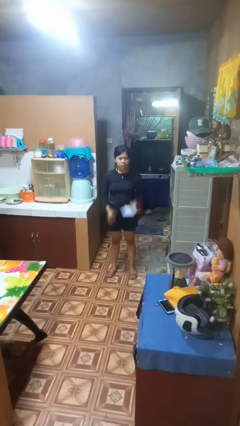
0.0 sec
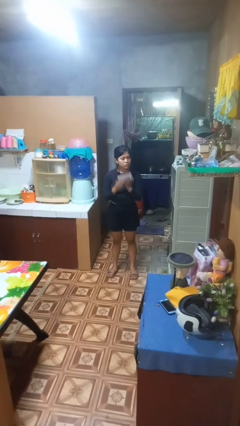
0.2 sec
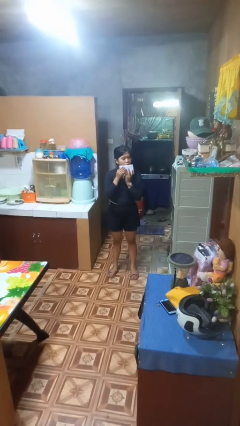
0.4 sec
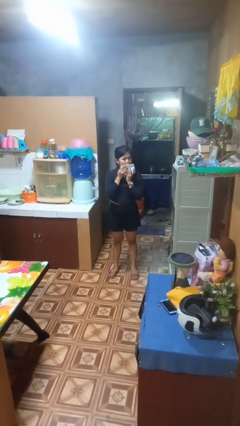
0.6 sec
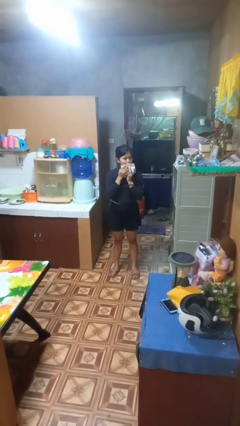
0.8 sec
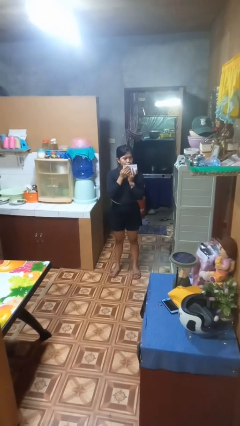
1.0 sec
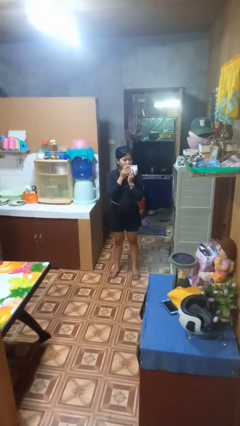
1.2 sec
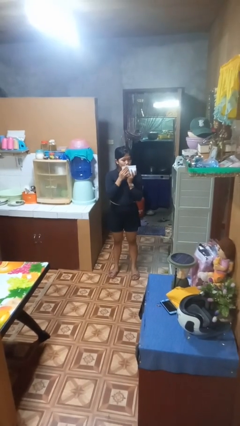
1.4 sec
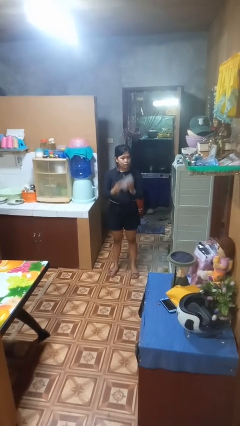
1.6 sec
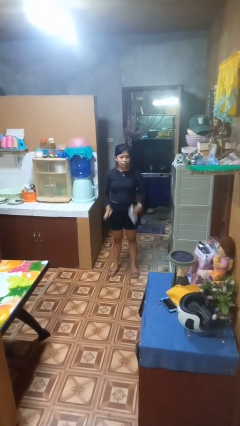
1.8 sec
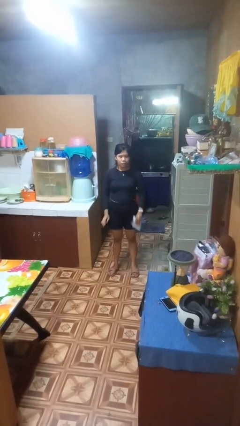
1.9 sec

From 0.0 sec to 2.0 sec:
person wipes mouth with napkin

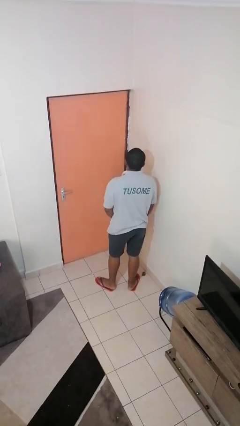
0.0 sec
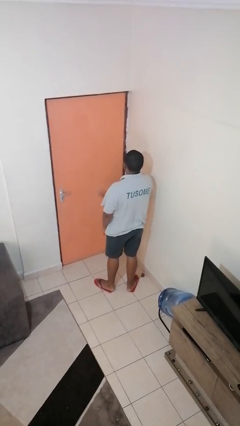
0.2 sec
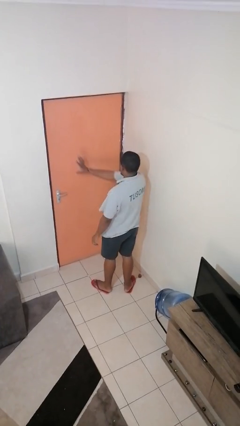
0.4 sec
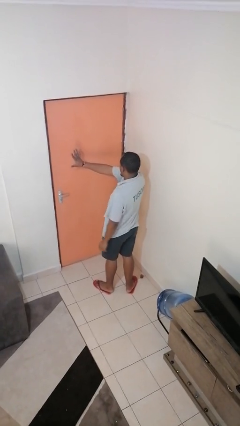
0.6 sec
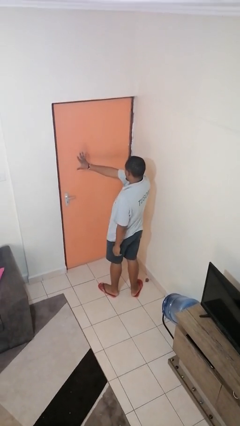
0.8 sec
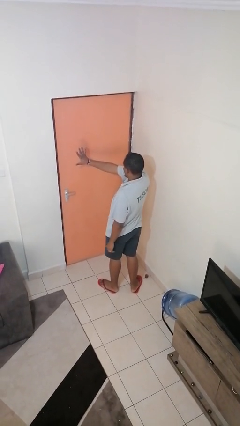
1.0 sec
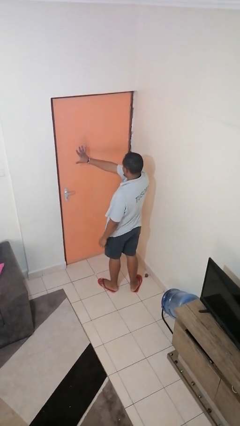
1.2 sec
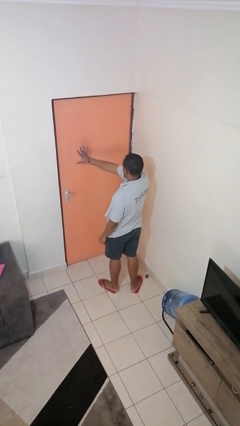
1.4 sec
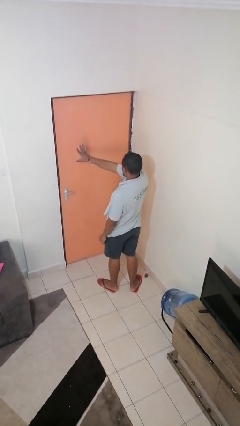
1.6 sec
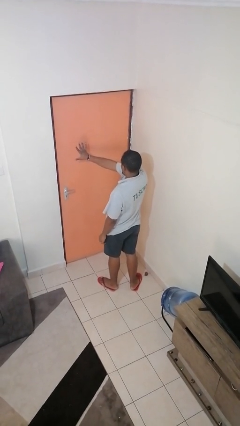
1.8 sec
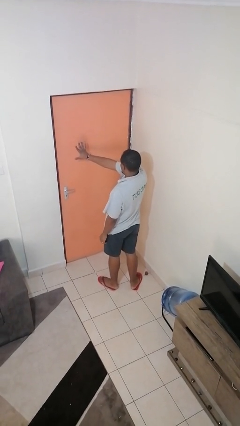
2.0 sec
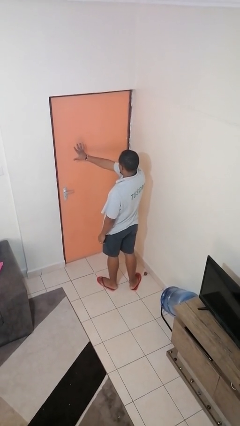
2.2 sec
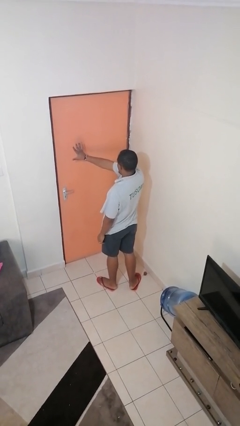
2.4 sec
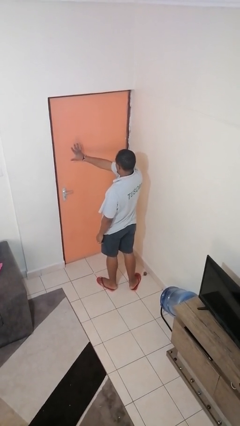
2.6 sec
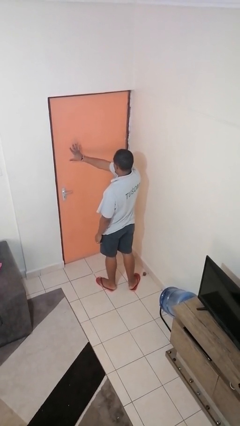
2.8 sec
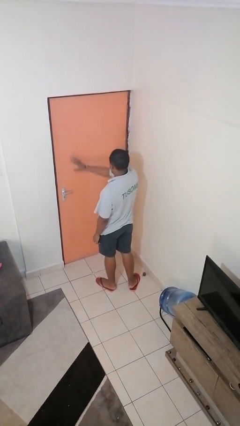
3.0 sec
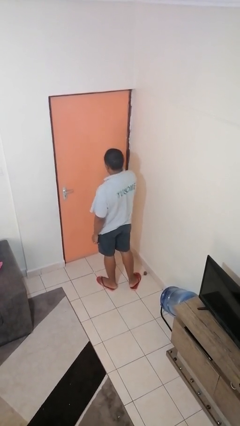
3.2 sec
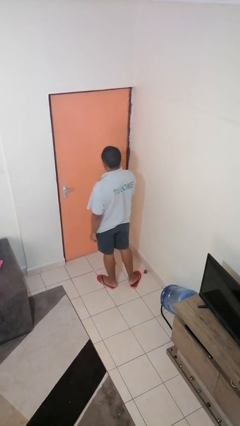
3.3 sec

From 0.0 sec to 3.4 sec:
person gestures number five

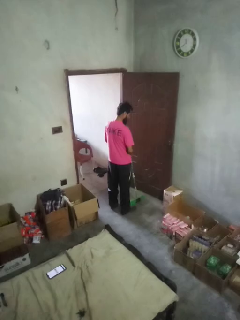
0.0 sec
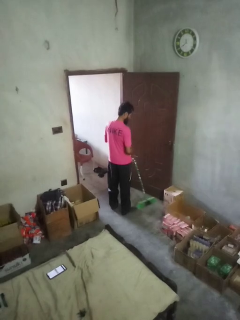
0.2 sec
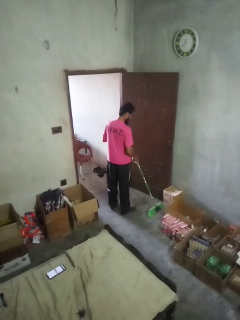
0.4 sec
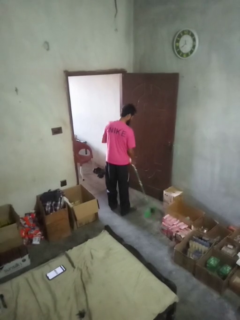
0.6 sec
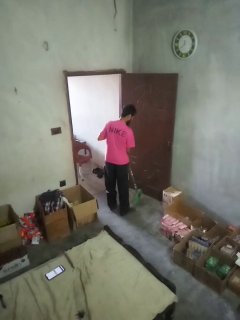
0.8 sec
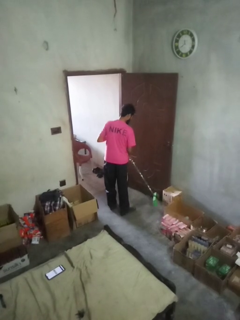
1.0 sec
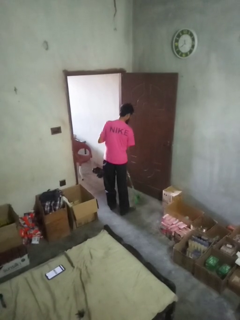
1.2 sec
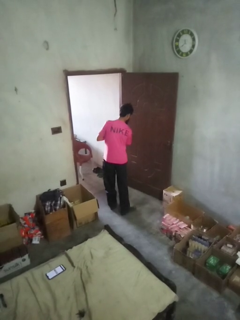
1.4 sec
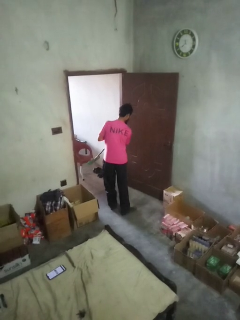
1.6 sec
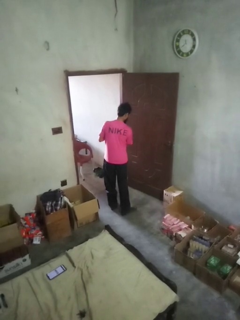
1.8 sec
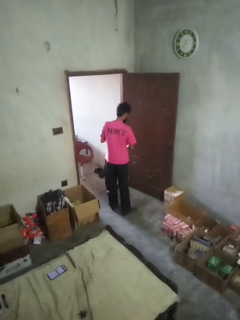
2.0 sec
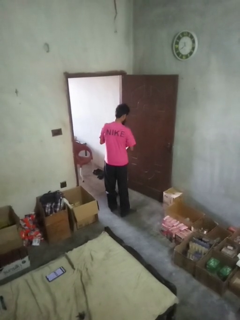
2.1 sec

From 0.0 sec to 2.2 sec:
person sweeps floor

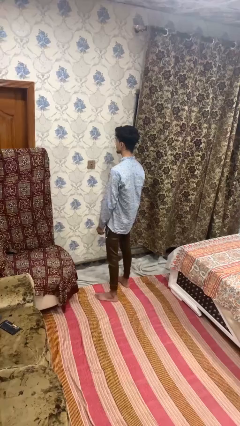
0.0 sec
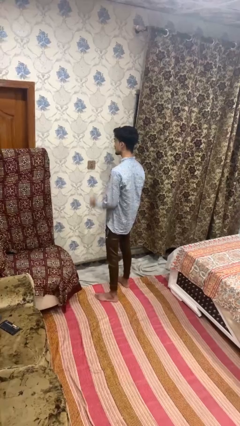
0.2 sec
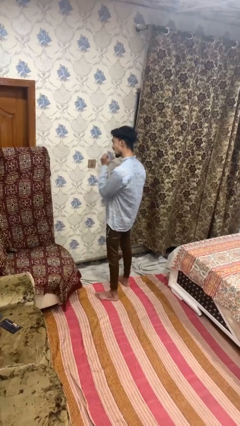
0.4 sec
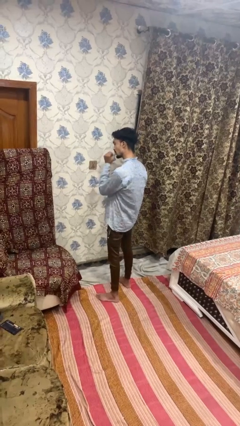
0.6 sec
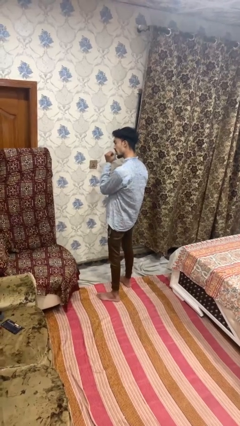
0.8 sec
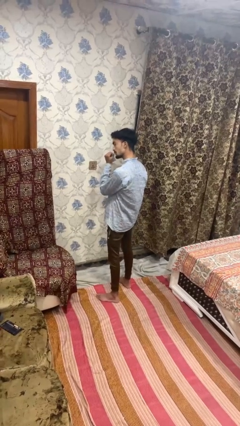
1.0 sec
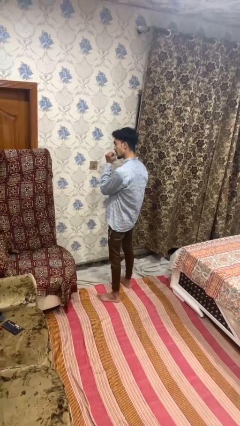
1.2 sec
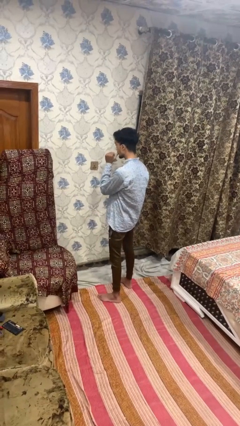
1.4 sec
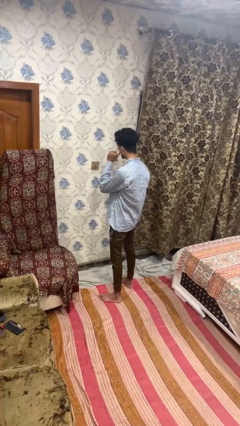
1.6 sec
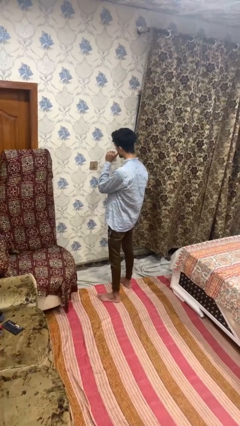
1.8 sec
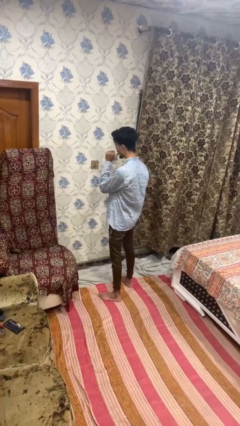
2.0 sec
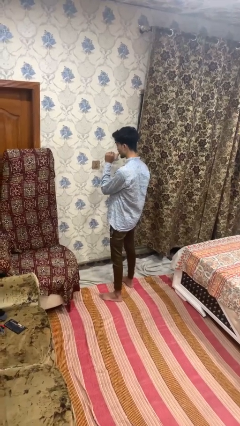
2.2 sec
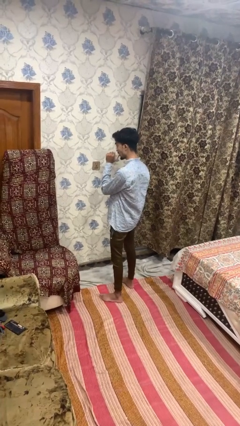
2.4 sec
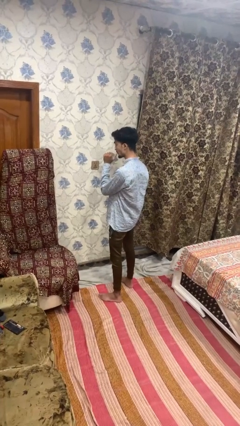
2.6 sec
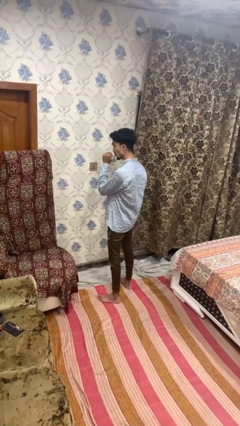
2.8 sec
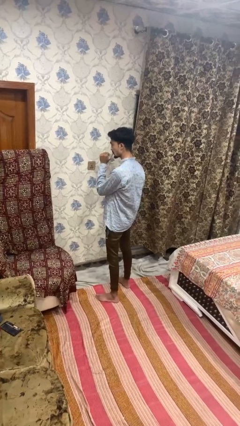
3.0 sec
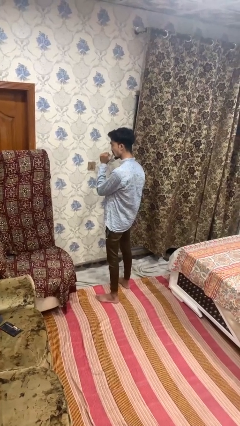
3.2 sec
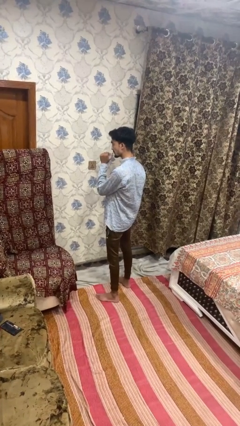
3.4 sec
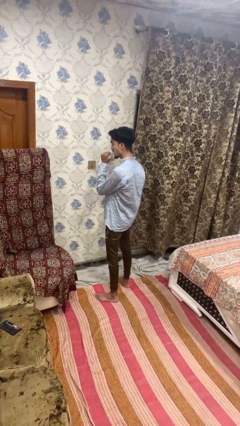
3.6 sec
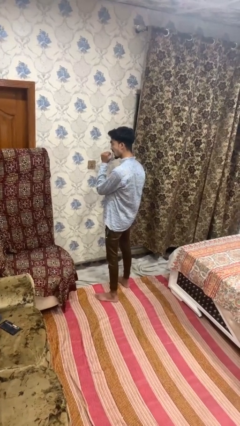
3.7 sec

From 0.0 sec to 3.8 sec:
person licks fingers

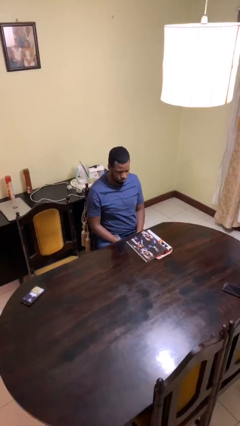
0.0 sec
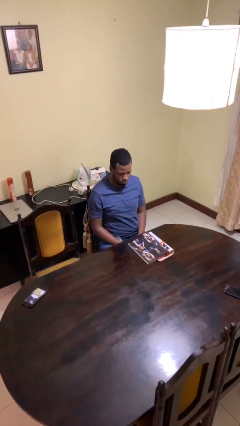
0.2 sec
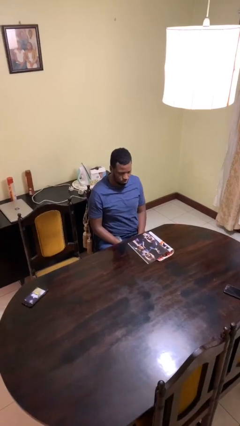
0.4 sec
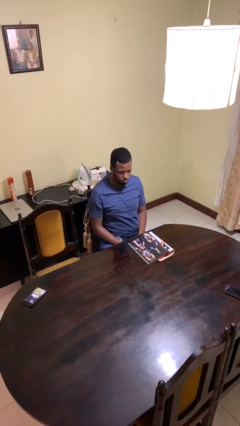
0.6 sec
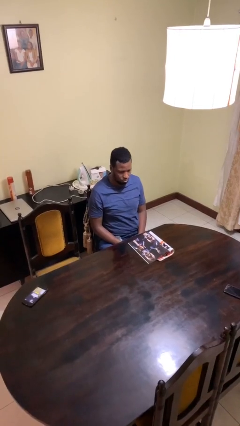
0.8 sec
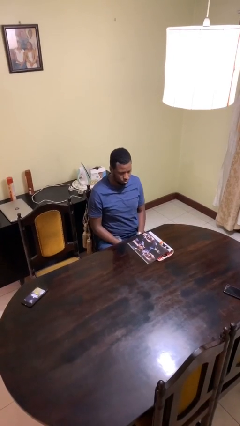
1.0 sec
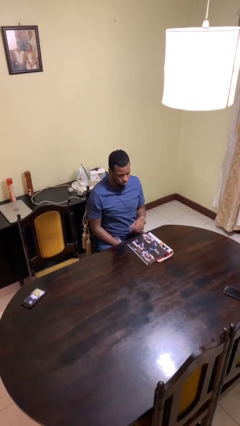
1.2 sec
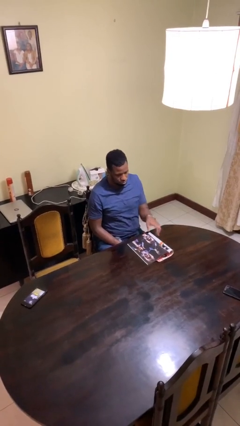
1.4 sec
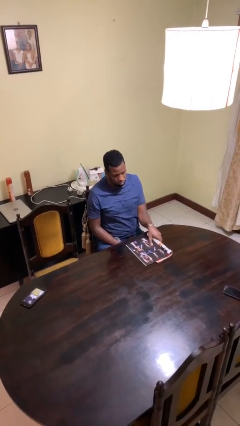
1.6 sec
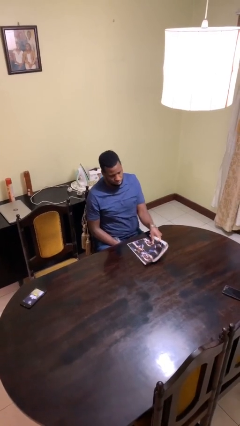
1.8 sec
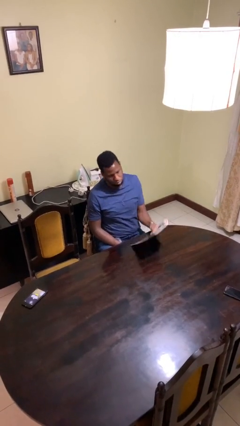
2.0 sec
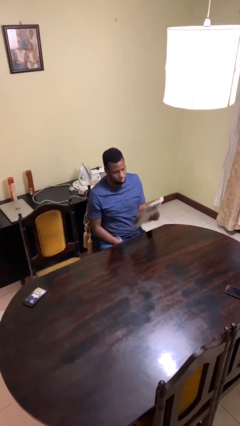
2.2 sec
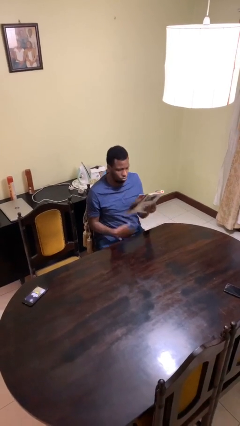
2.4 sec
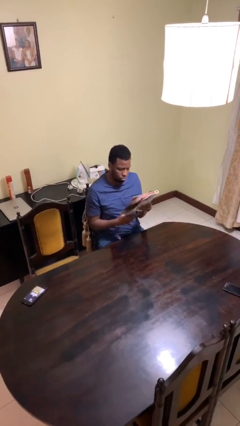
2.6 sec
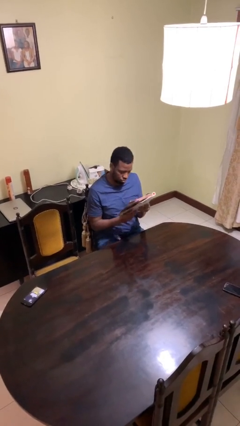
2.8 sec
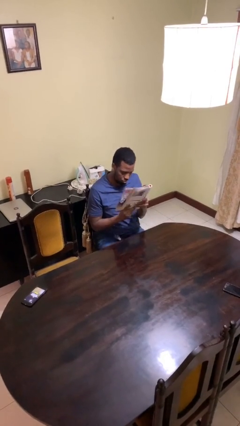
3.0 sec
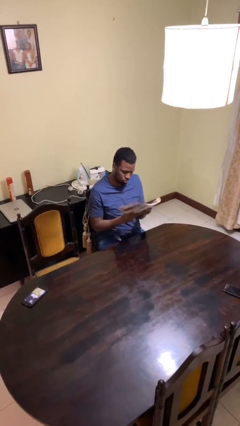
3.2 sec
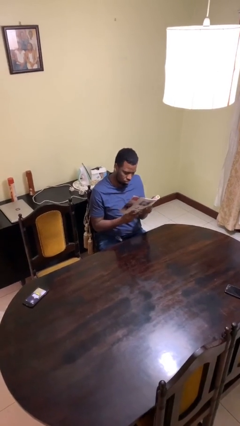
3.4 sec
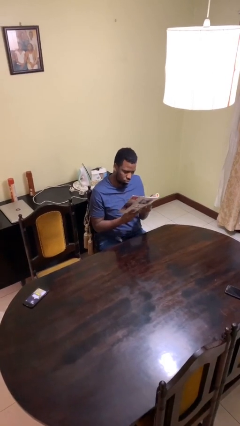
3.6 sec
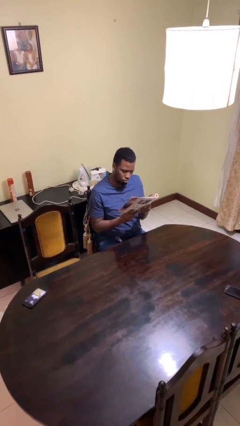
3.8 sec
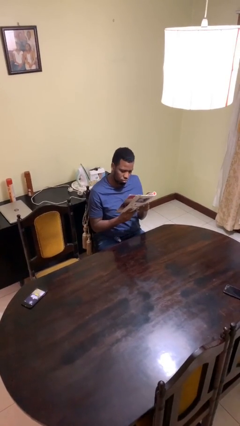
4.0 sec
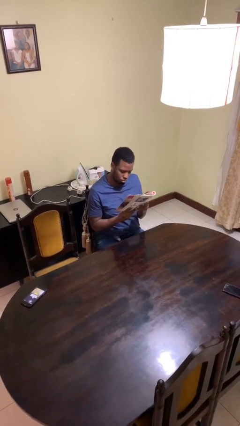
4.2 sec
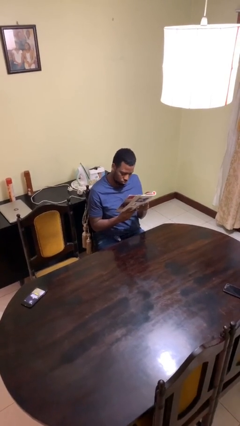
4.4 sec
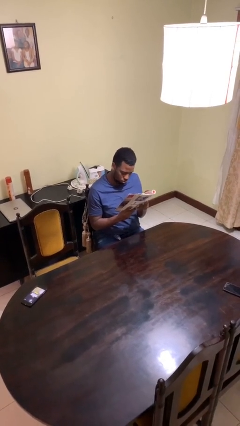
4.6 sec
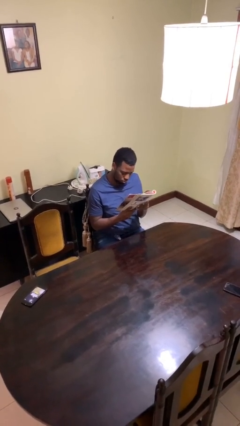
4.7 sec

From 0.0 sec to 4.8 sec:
person picks up object from table

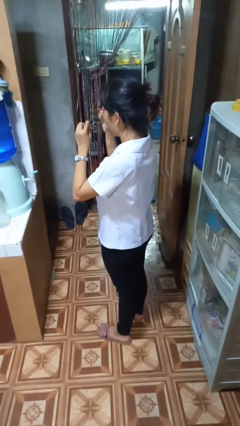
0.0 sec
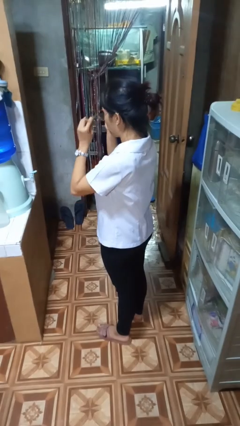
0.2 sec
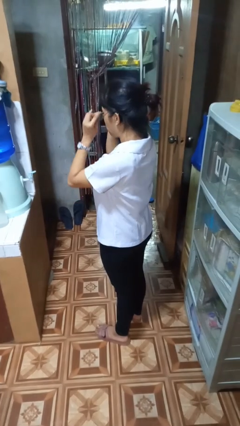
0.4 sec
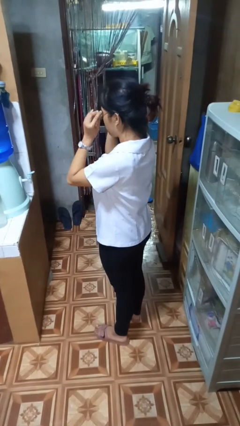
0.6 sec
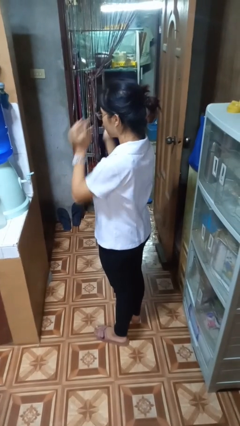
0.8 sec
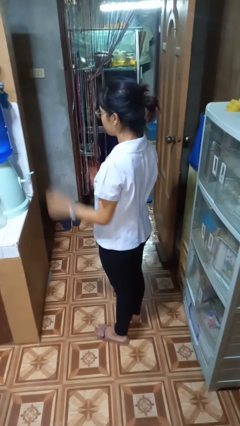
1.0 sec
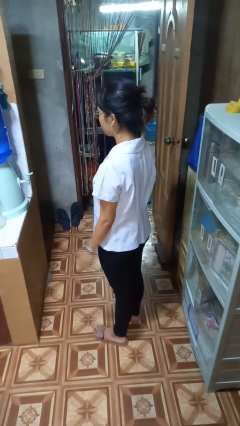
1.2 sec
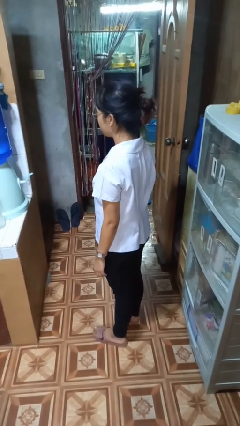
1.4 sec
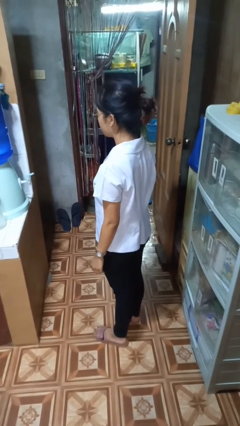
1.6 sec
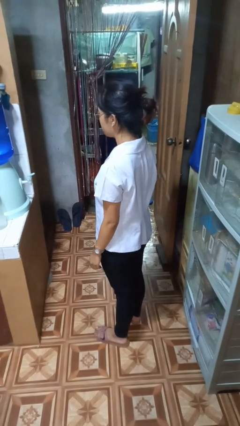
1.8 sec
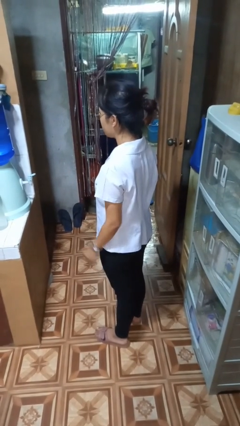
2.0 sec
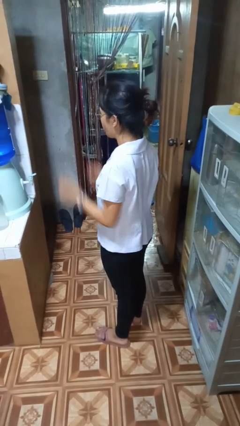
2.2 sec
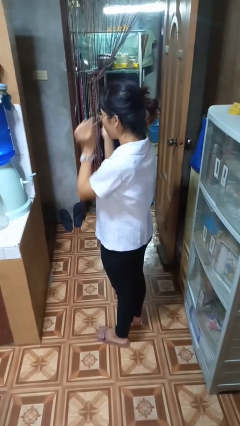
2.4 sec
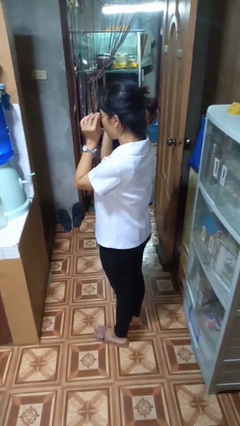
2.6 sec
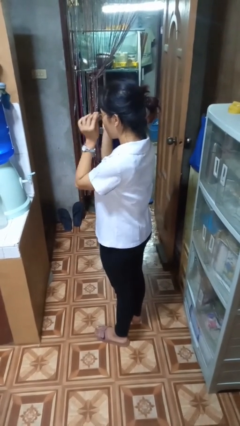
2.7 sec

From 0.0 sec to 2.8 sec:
person puts on glasses
